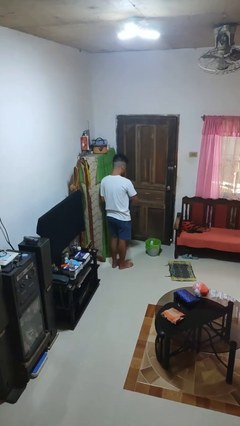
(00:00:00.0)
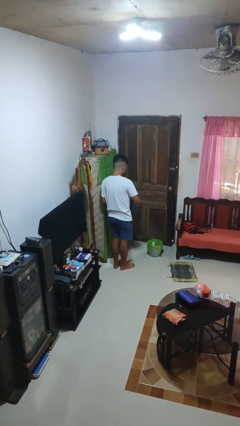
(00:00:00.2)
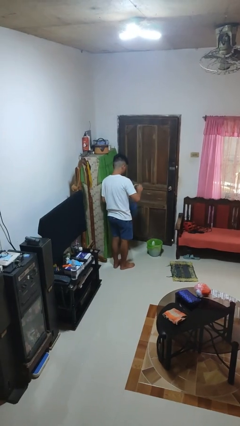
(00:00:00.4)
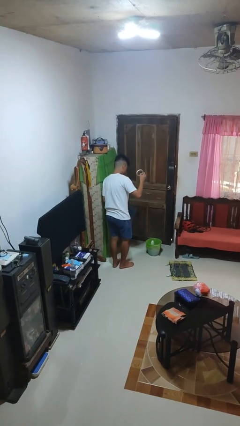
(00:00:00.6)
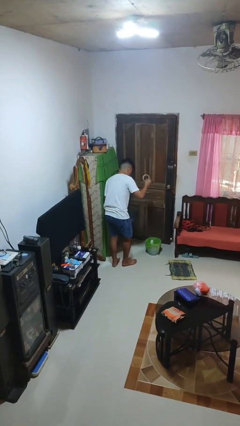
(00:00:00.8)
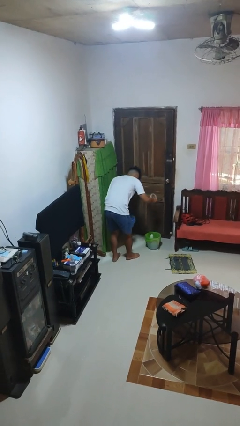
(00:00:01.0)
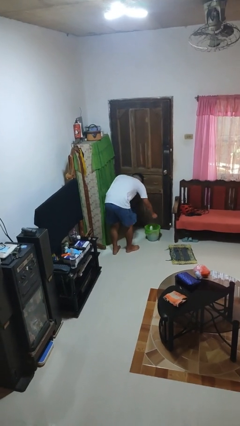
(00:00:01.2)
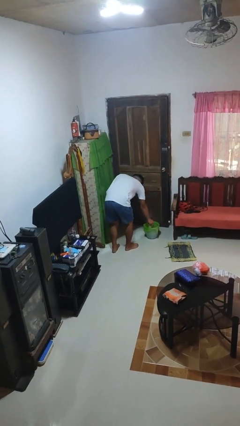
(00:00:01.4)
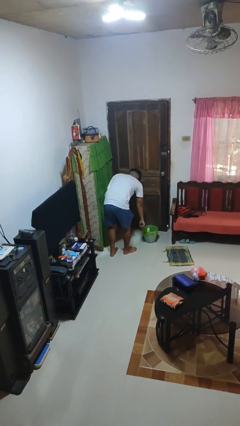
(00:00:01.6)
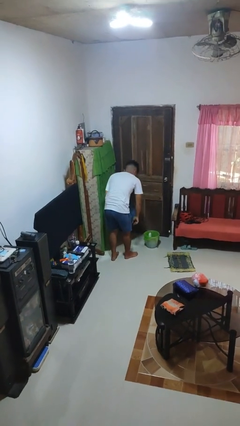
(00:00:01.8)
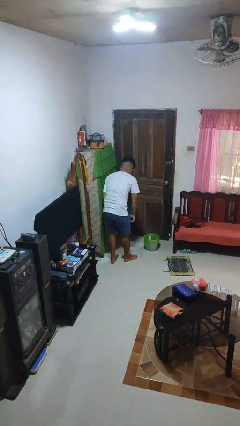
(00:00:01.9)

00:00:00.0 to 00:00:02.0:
person discards trash

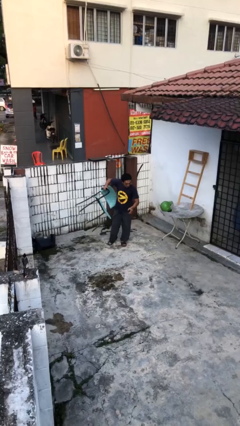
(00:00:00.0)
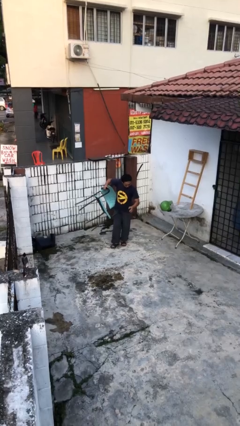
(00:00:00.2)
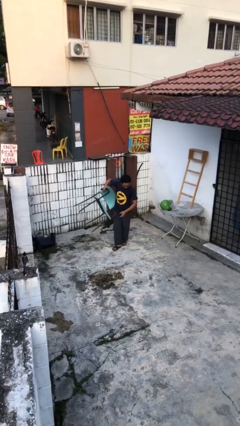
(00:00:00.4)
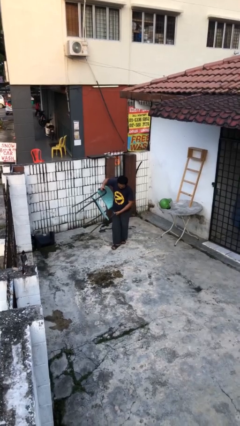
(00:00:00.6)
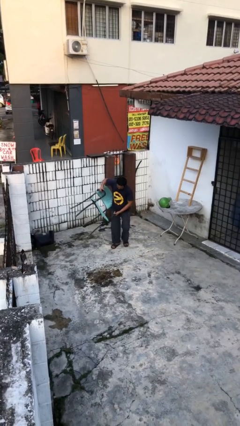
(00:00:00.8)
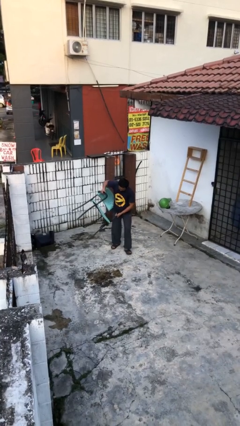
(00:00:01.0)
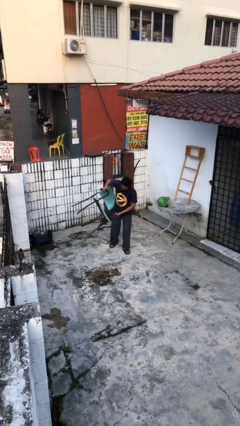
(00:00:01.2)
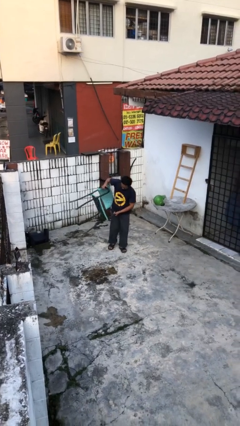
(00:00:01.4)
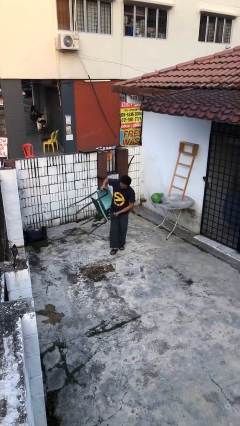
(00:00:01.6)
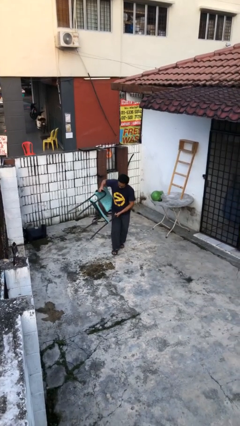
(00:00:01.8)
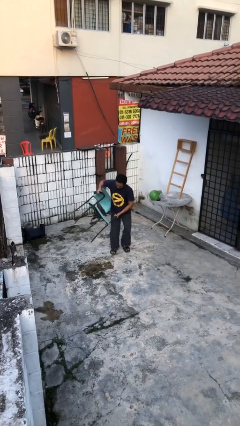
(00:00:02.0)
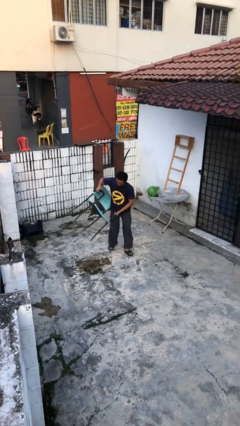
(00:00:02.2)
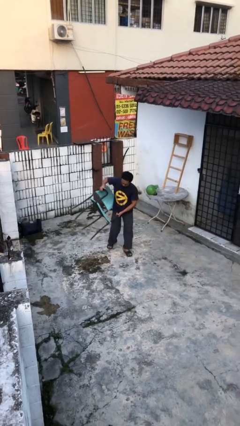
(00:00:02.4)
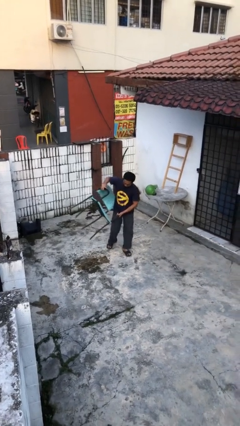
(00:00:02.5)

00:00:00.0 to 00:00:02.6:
person carries heavy object

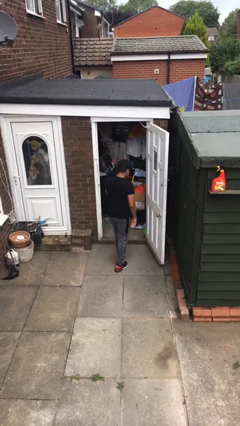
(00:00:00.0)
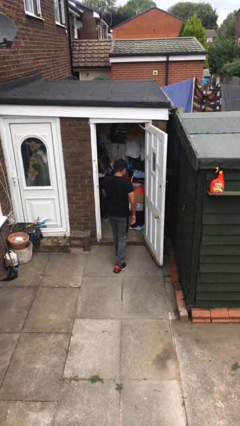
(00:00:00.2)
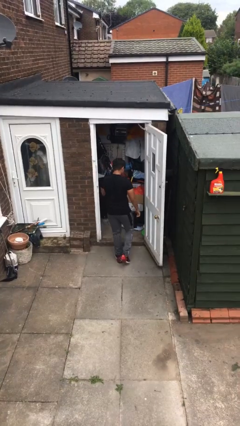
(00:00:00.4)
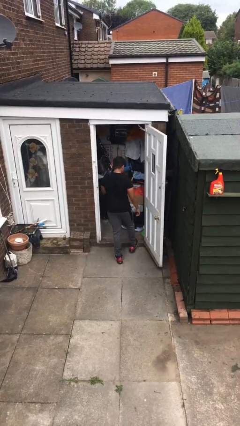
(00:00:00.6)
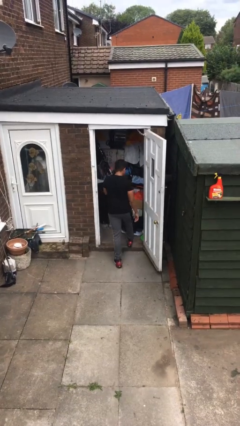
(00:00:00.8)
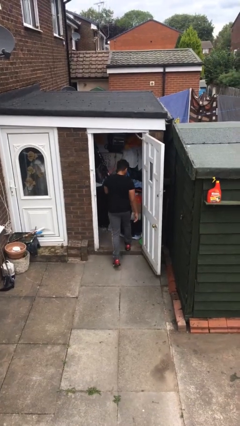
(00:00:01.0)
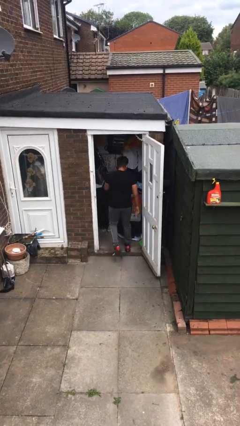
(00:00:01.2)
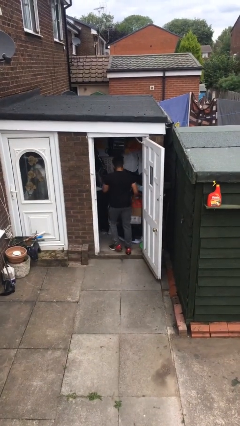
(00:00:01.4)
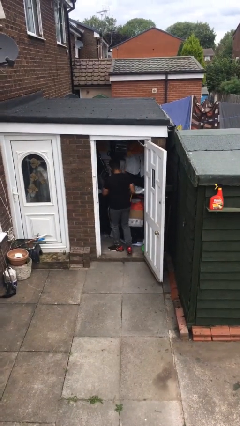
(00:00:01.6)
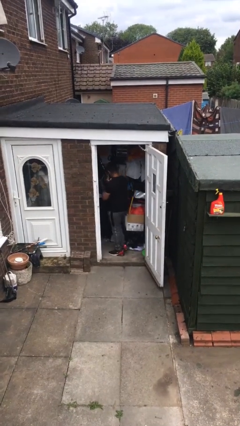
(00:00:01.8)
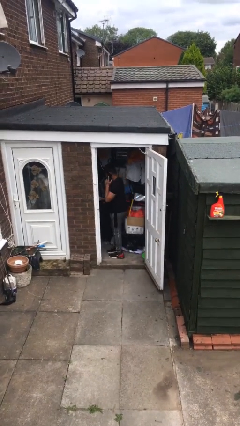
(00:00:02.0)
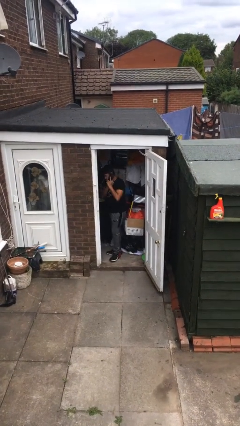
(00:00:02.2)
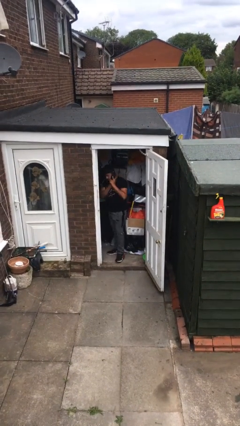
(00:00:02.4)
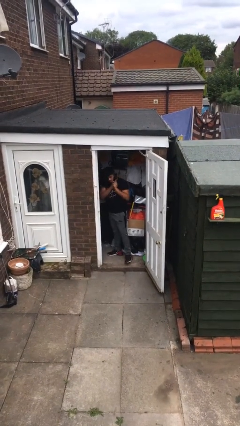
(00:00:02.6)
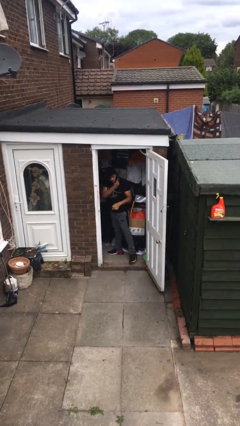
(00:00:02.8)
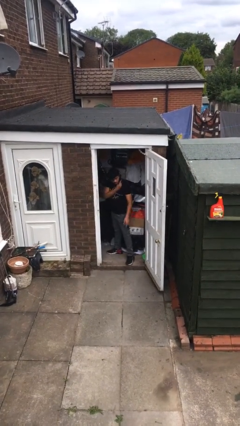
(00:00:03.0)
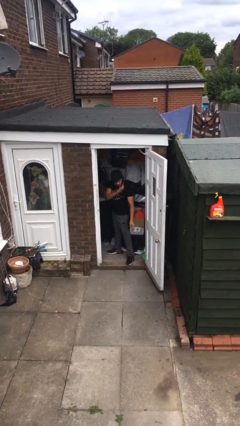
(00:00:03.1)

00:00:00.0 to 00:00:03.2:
person exits scene through structure

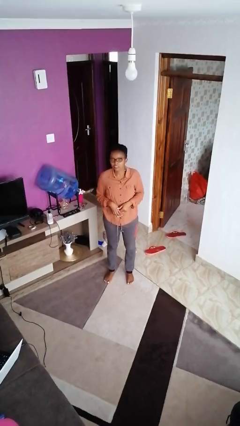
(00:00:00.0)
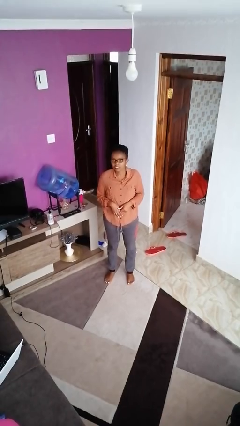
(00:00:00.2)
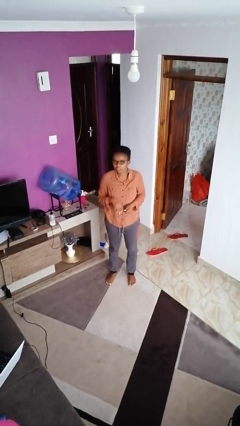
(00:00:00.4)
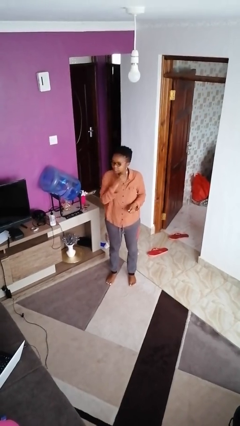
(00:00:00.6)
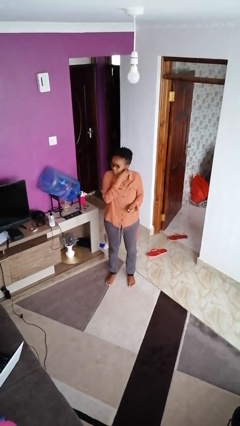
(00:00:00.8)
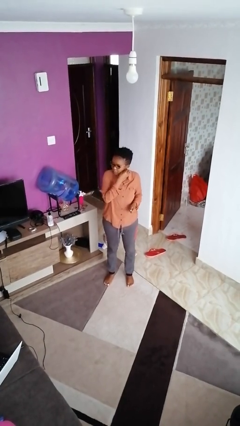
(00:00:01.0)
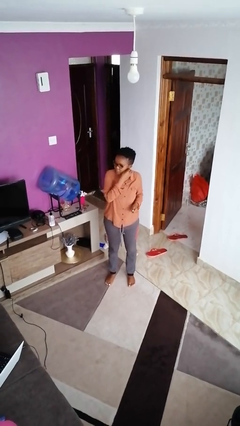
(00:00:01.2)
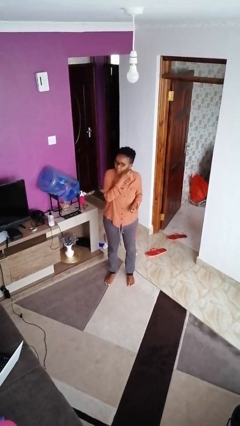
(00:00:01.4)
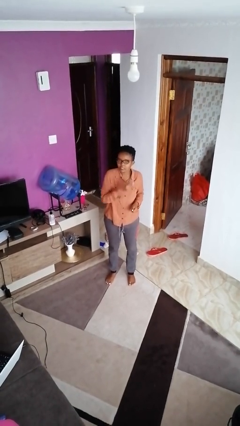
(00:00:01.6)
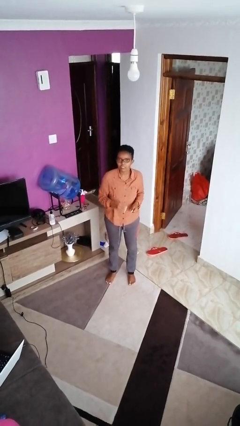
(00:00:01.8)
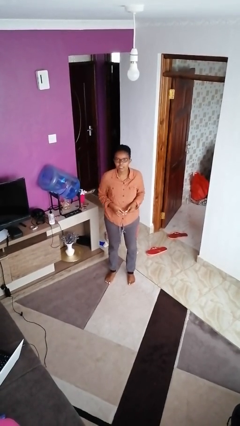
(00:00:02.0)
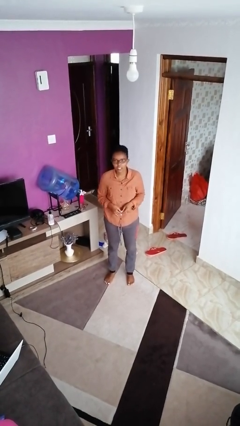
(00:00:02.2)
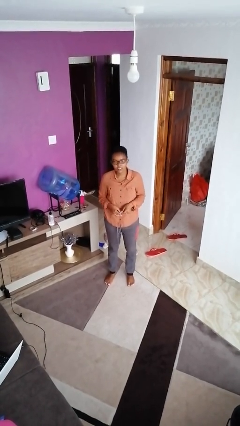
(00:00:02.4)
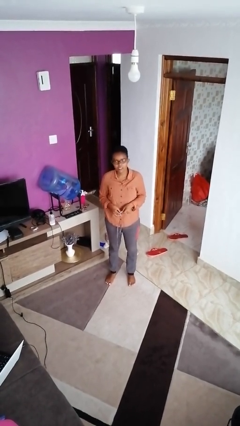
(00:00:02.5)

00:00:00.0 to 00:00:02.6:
person takes off earrings

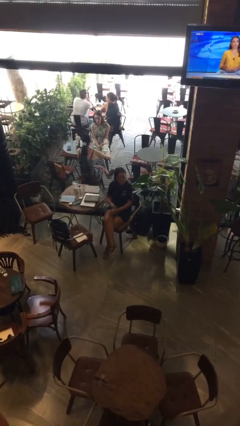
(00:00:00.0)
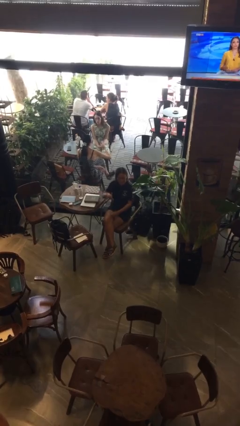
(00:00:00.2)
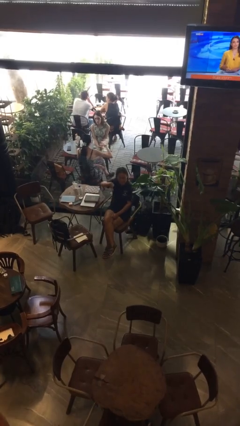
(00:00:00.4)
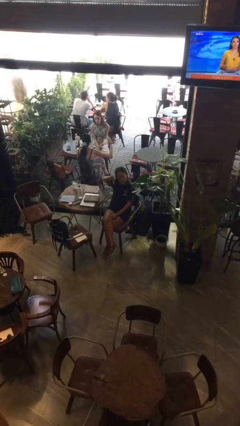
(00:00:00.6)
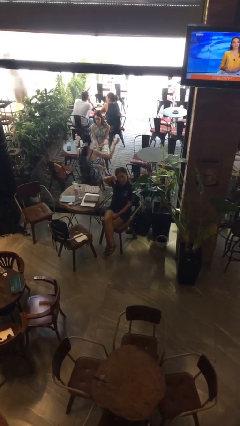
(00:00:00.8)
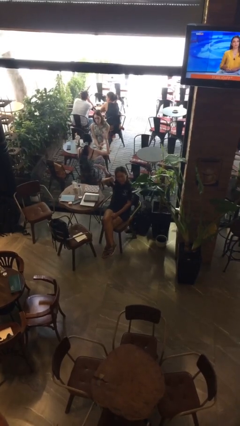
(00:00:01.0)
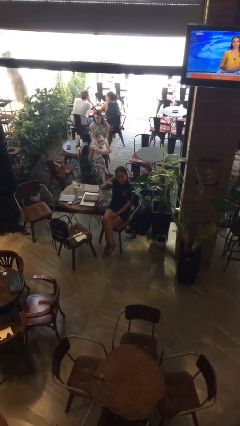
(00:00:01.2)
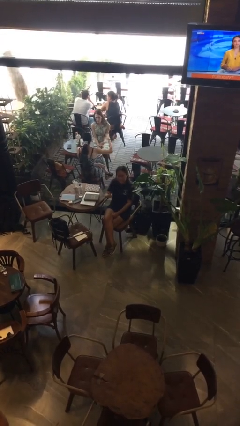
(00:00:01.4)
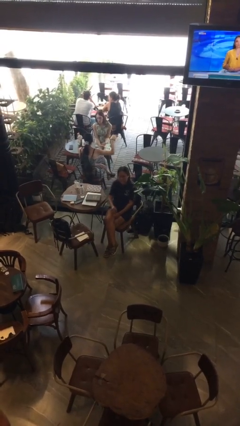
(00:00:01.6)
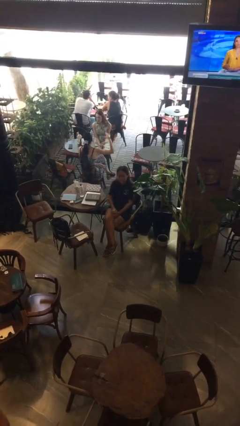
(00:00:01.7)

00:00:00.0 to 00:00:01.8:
person gestures thumbs down

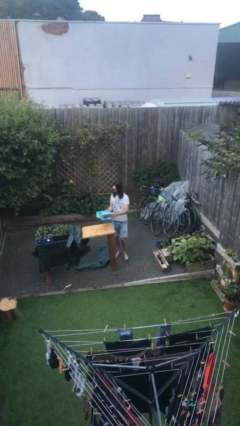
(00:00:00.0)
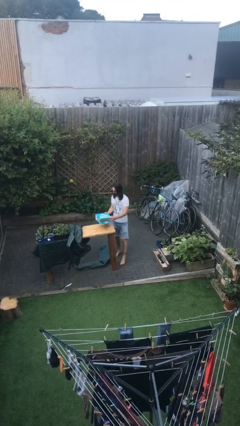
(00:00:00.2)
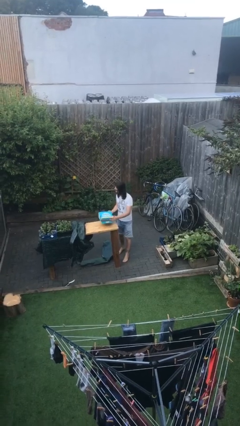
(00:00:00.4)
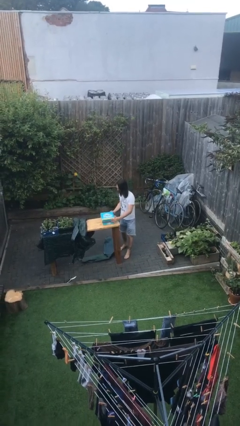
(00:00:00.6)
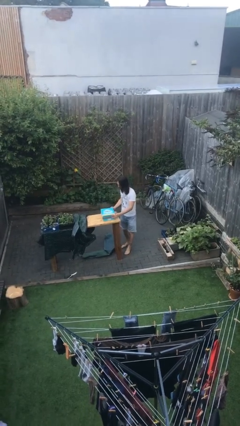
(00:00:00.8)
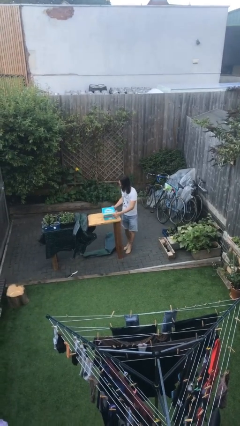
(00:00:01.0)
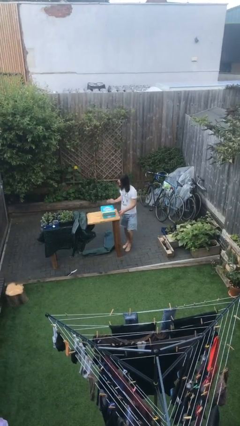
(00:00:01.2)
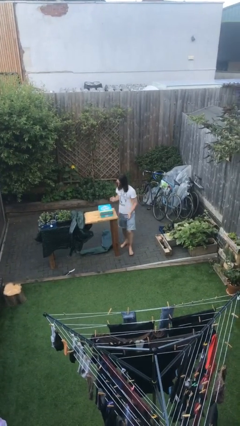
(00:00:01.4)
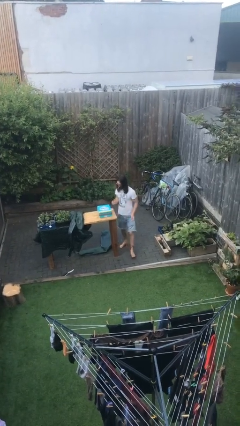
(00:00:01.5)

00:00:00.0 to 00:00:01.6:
person puts down object on table

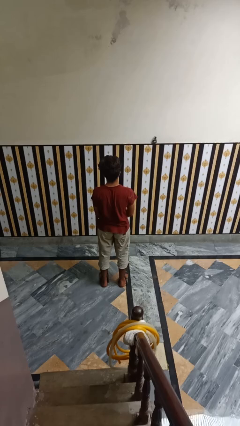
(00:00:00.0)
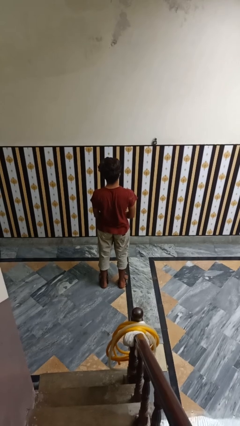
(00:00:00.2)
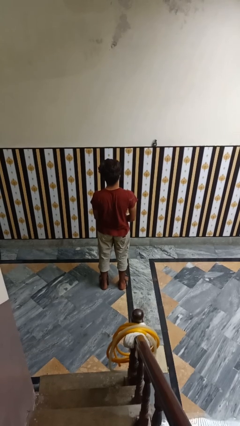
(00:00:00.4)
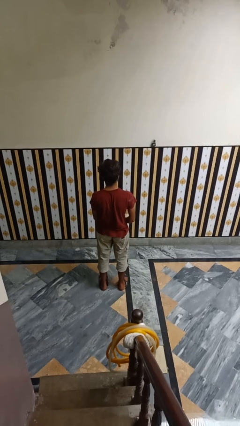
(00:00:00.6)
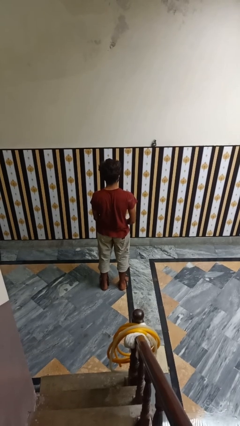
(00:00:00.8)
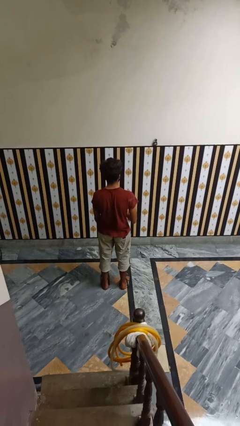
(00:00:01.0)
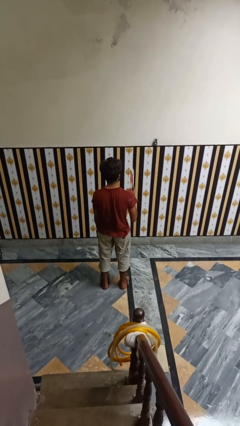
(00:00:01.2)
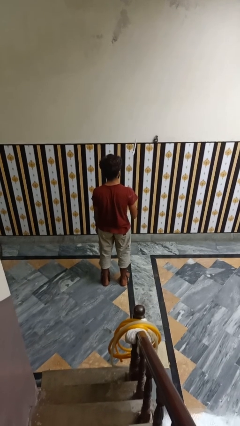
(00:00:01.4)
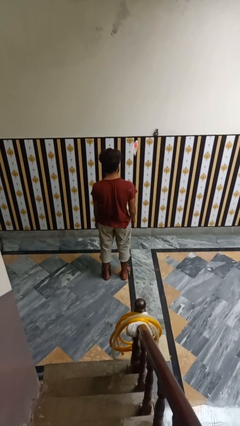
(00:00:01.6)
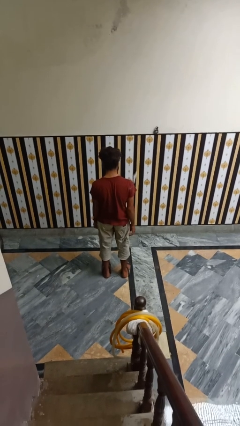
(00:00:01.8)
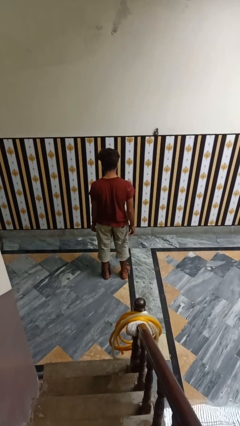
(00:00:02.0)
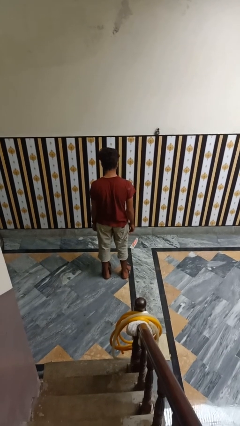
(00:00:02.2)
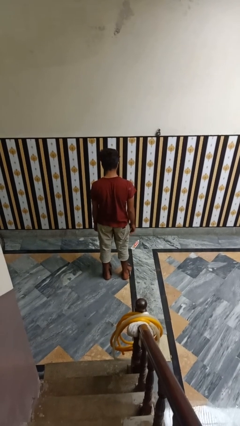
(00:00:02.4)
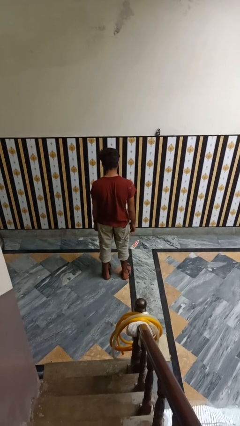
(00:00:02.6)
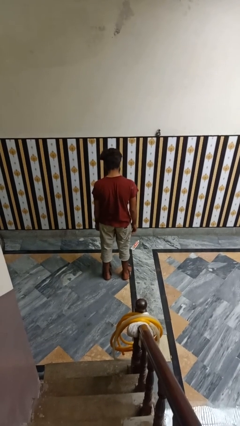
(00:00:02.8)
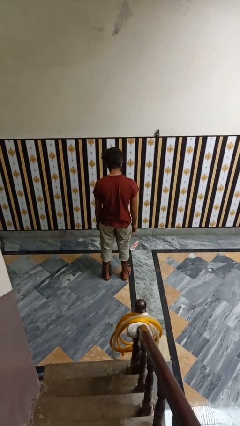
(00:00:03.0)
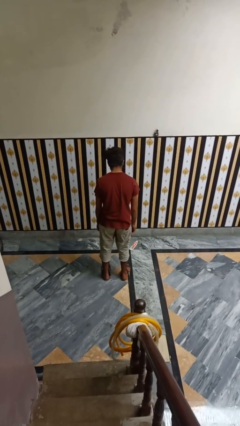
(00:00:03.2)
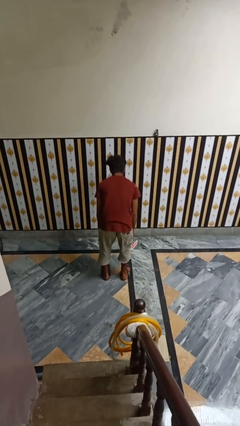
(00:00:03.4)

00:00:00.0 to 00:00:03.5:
person throws object into air
